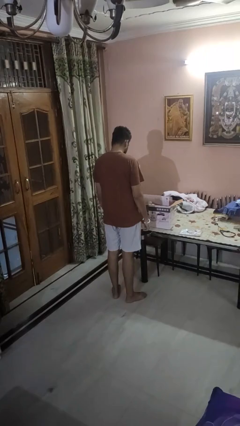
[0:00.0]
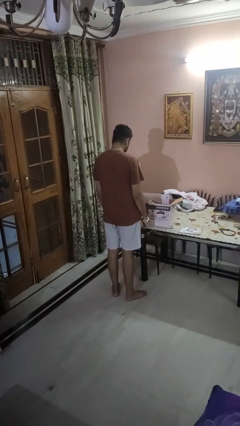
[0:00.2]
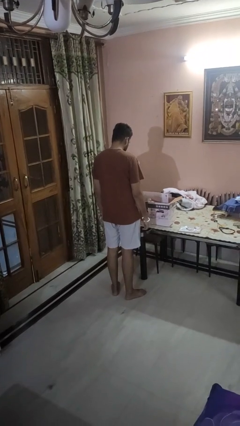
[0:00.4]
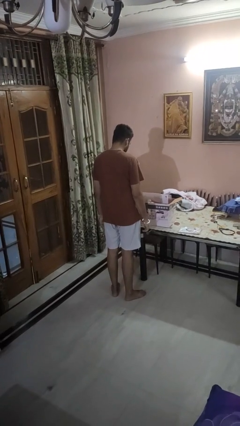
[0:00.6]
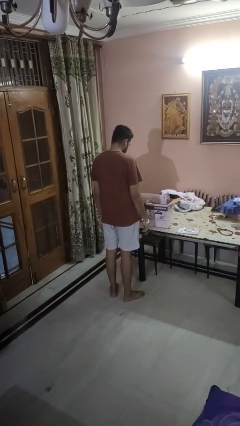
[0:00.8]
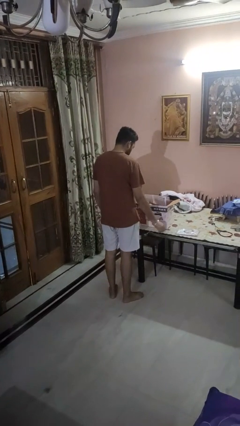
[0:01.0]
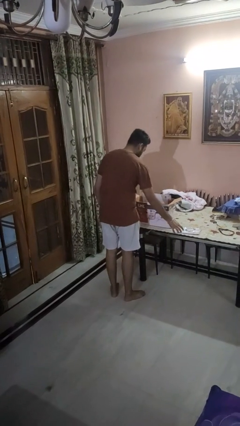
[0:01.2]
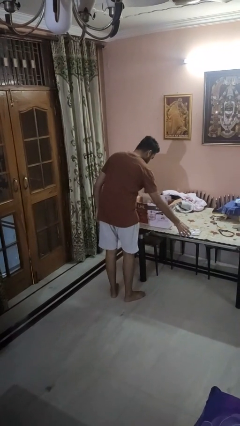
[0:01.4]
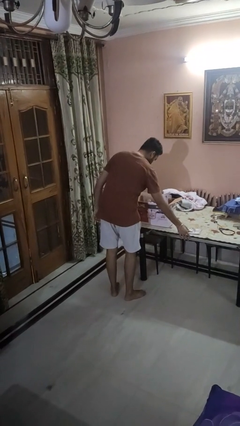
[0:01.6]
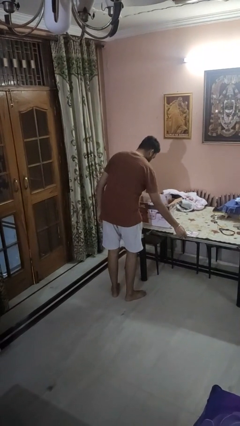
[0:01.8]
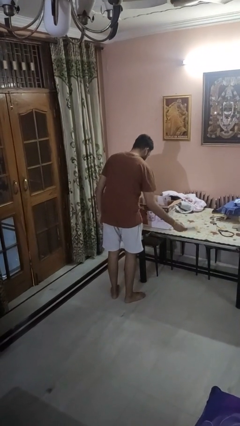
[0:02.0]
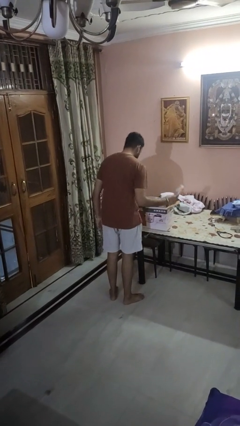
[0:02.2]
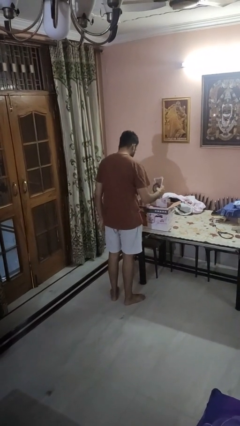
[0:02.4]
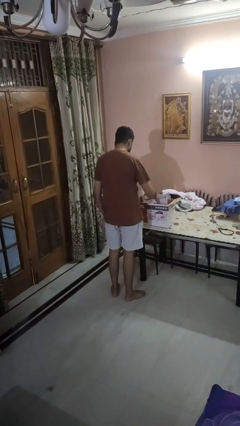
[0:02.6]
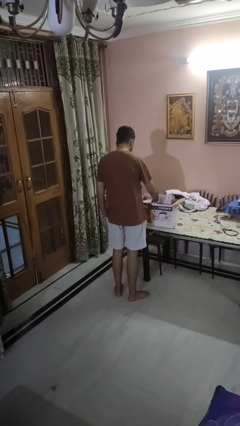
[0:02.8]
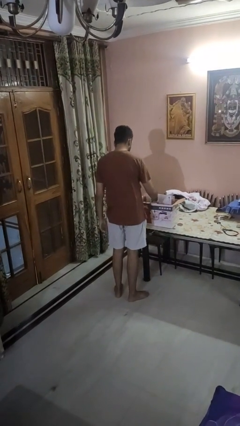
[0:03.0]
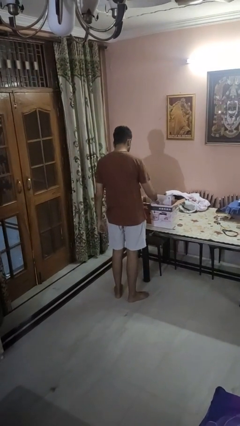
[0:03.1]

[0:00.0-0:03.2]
person puts object into box

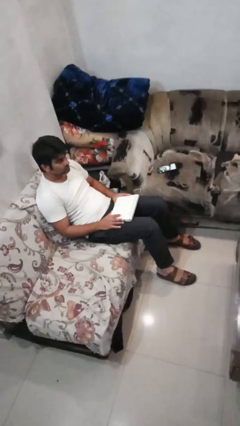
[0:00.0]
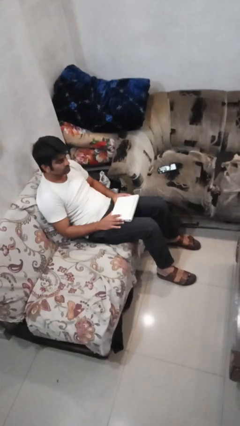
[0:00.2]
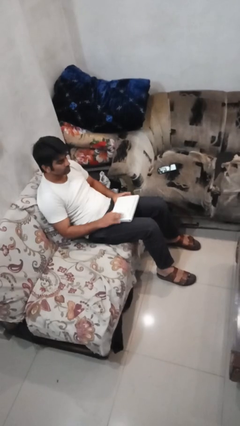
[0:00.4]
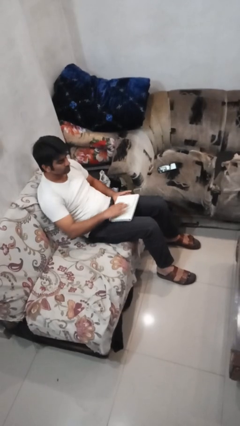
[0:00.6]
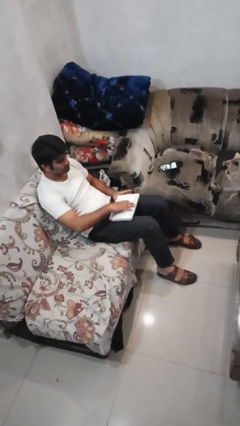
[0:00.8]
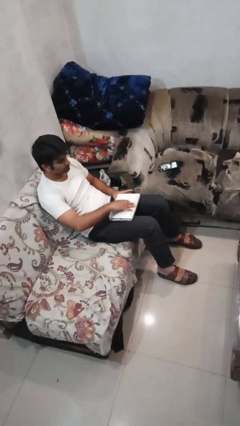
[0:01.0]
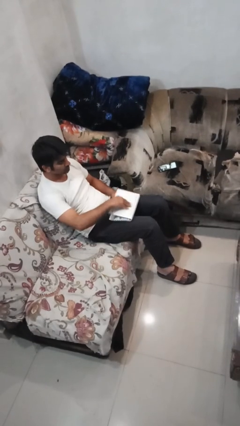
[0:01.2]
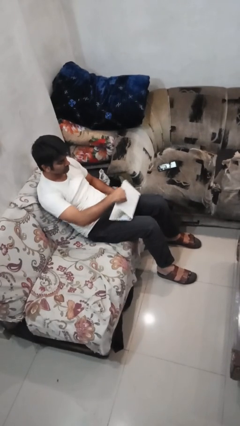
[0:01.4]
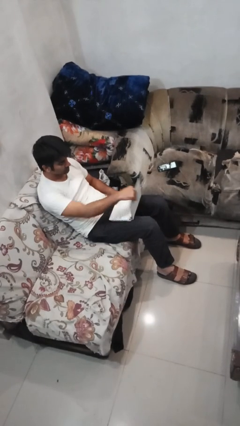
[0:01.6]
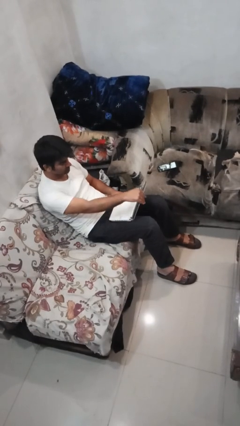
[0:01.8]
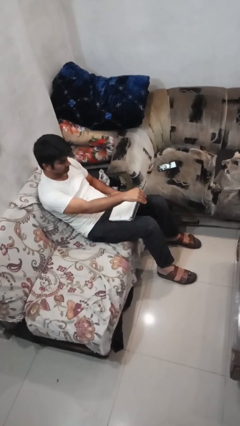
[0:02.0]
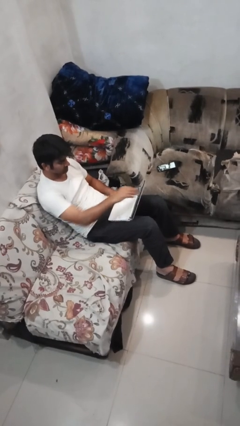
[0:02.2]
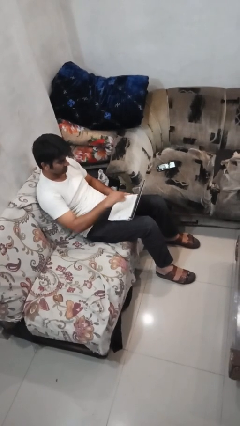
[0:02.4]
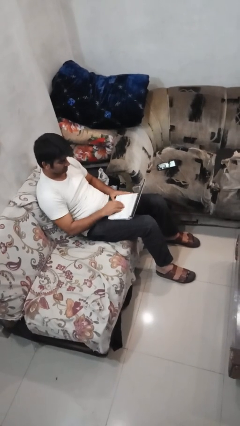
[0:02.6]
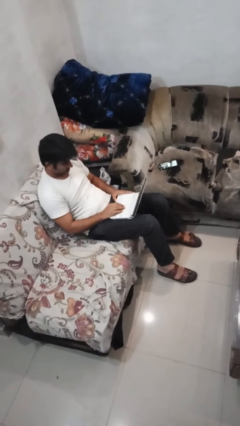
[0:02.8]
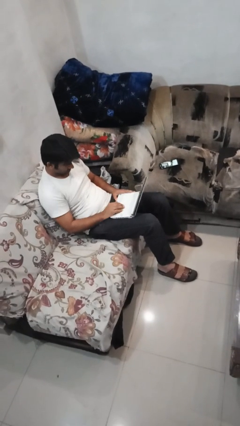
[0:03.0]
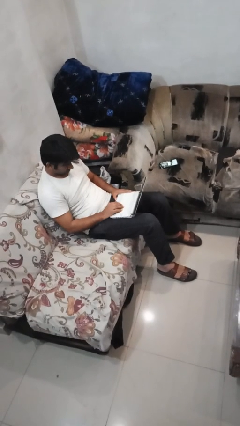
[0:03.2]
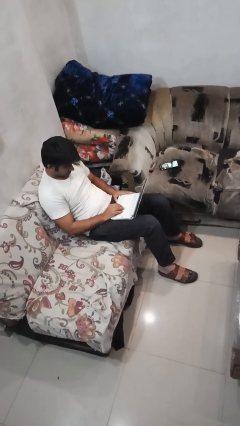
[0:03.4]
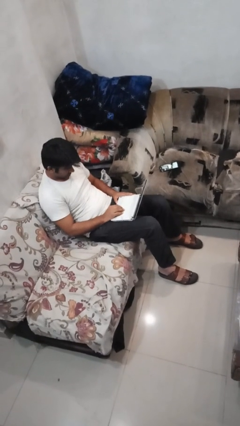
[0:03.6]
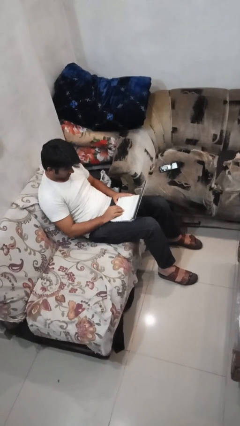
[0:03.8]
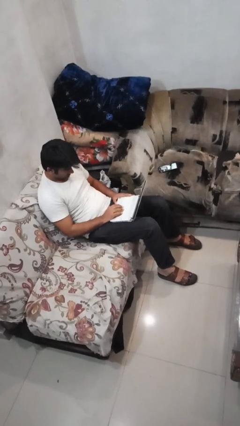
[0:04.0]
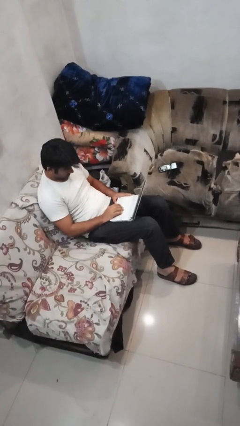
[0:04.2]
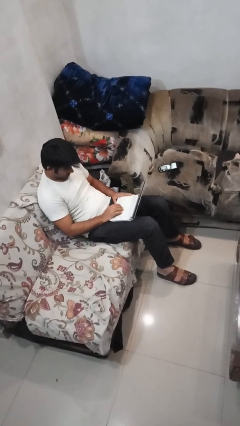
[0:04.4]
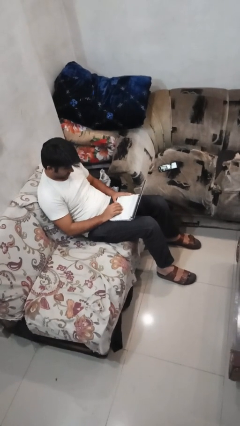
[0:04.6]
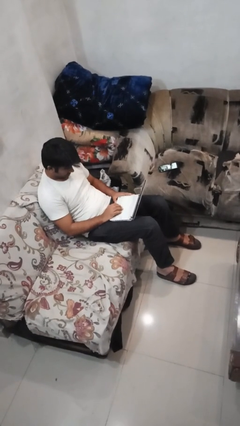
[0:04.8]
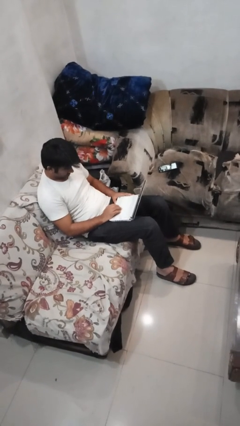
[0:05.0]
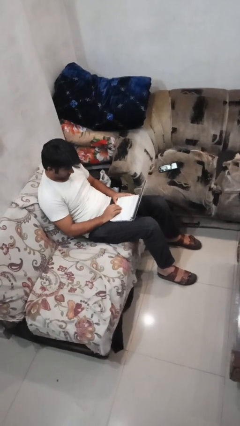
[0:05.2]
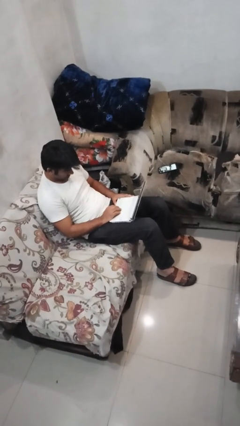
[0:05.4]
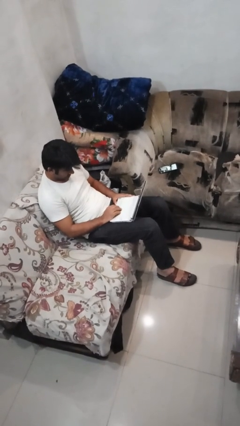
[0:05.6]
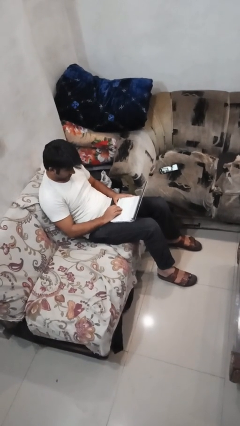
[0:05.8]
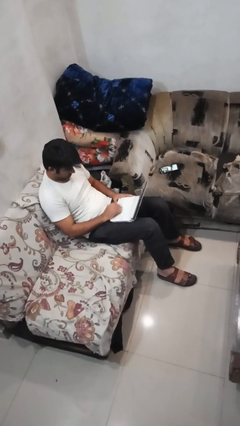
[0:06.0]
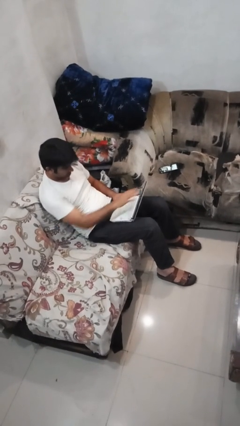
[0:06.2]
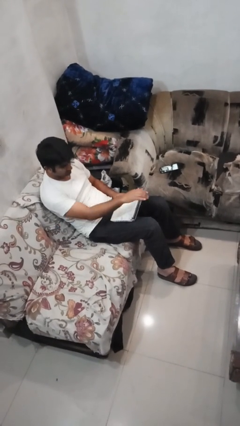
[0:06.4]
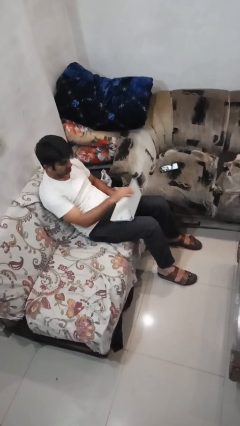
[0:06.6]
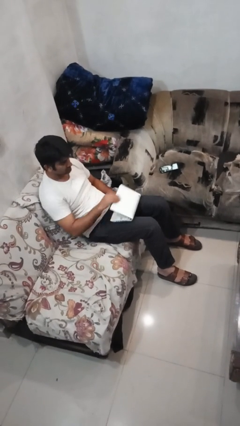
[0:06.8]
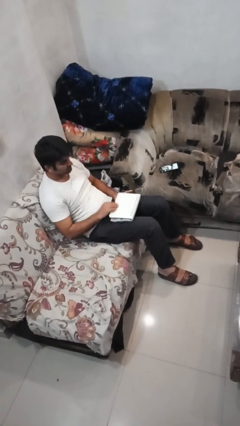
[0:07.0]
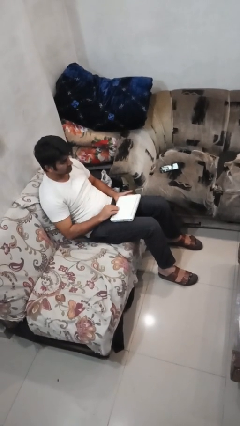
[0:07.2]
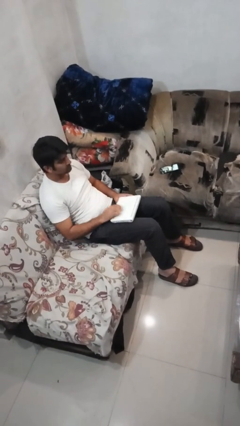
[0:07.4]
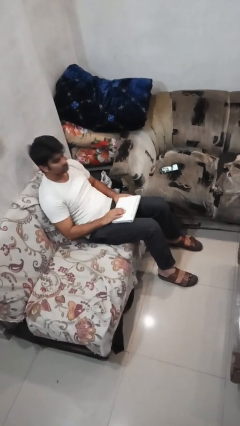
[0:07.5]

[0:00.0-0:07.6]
person interacts with laptop

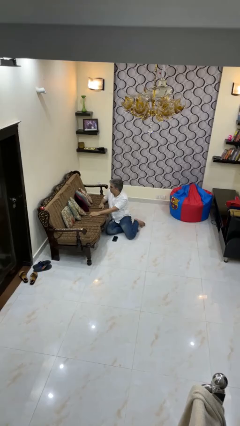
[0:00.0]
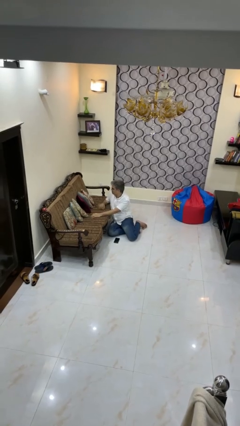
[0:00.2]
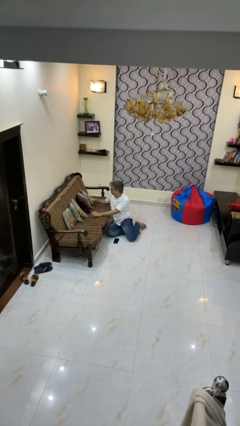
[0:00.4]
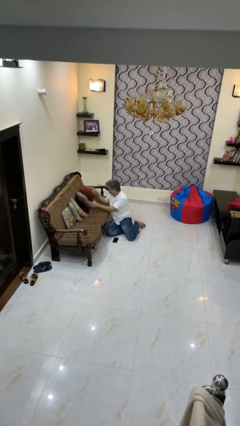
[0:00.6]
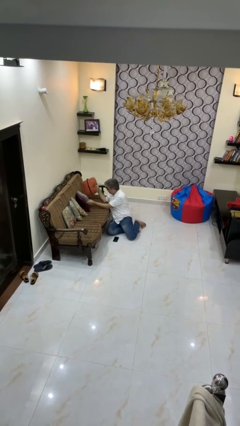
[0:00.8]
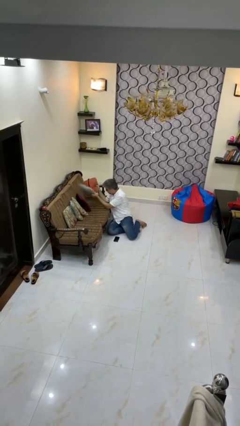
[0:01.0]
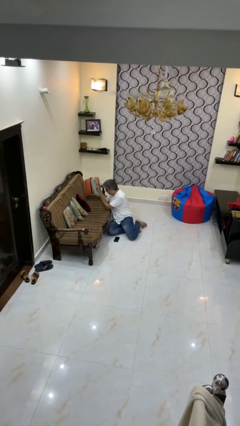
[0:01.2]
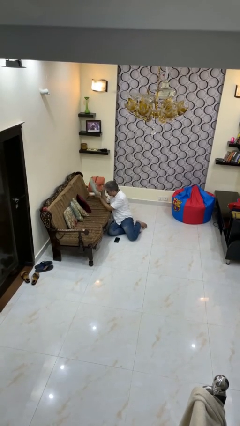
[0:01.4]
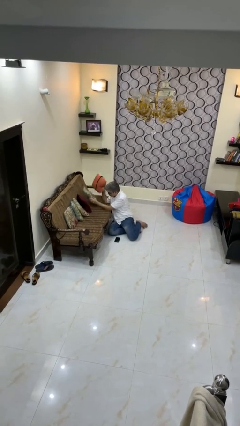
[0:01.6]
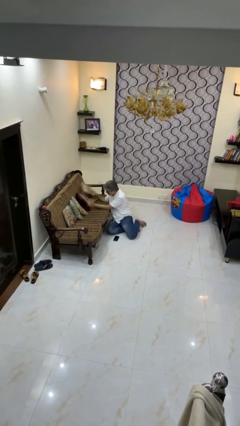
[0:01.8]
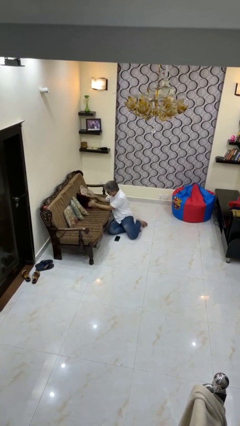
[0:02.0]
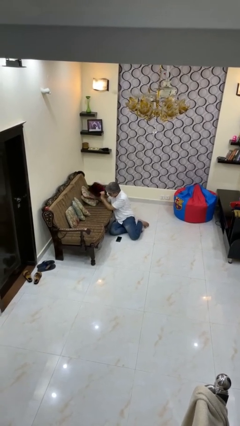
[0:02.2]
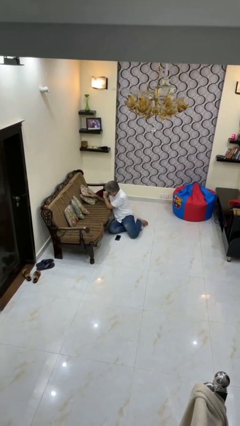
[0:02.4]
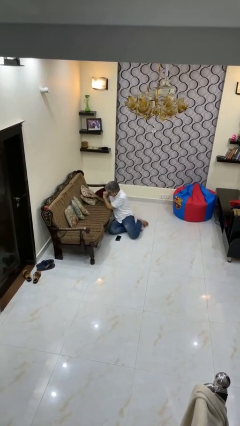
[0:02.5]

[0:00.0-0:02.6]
person searches in couch

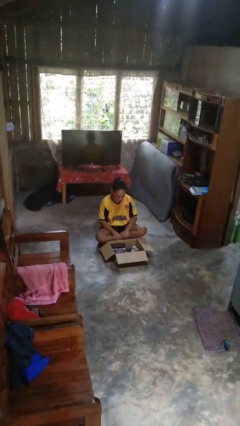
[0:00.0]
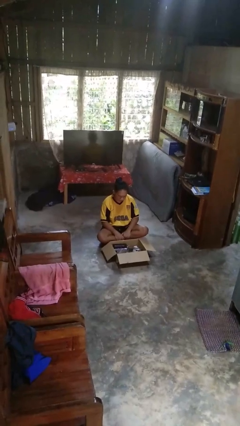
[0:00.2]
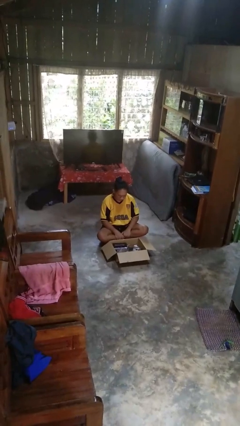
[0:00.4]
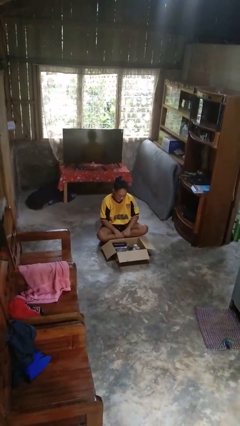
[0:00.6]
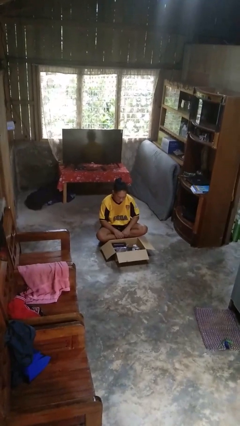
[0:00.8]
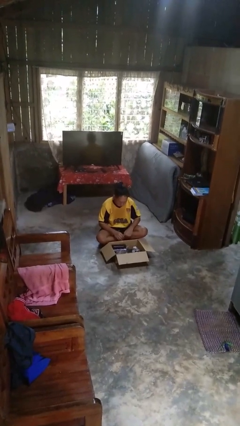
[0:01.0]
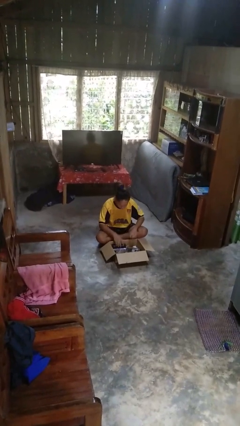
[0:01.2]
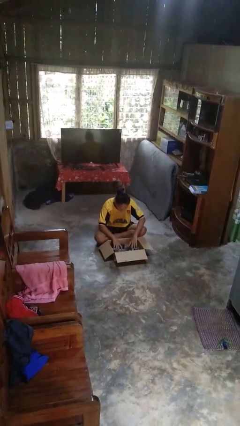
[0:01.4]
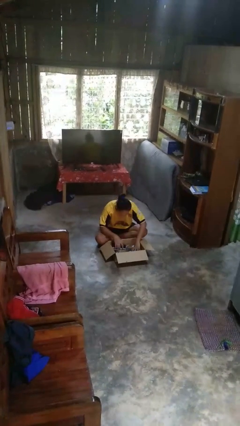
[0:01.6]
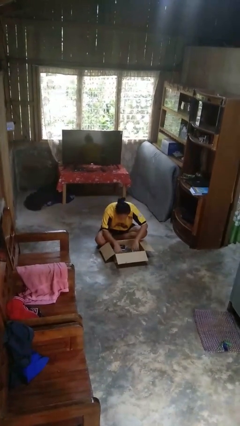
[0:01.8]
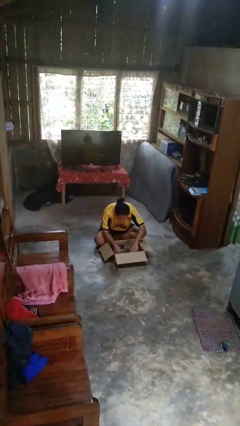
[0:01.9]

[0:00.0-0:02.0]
person searches in box

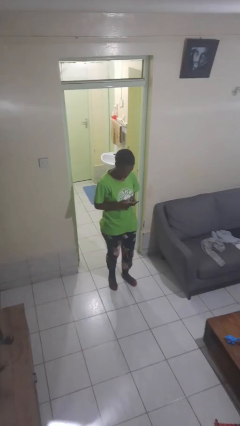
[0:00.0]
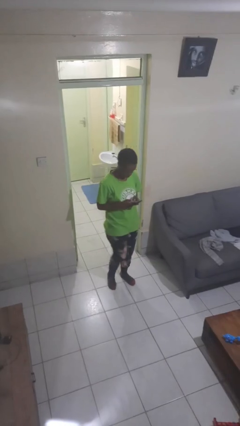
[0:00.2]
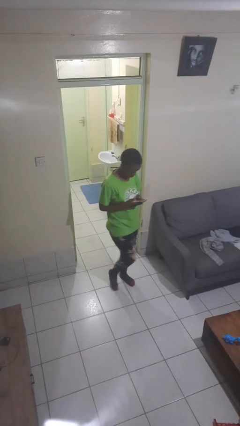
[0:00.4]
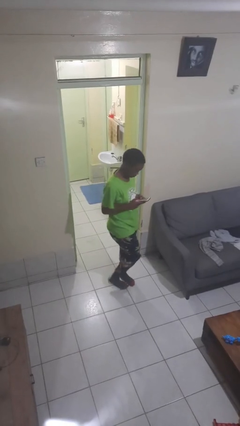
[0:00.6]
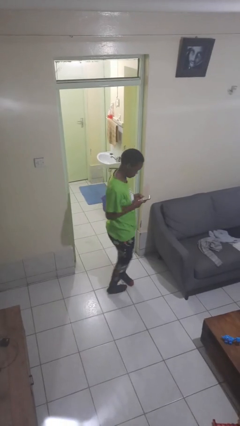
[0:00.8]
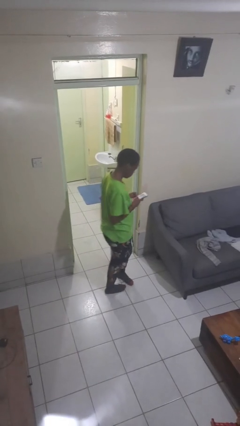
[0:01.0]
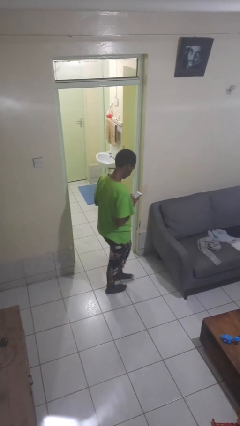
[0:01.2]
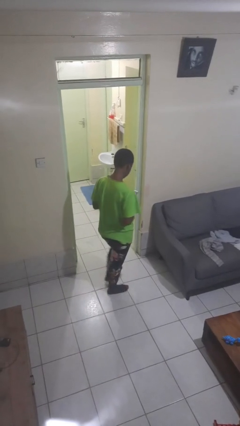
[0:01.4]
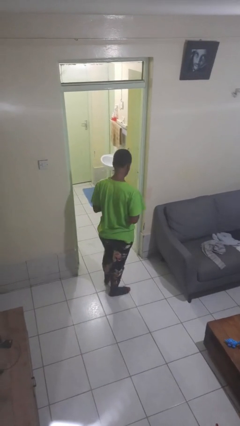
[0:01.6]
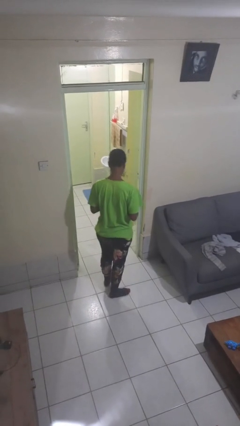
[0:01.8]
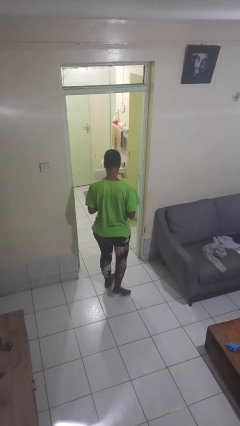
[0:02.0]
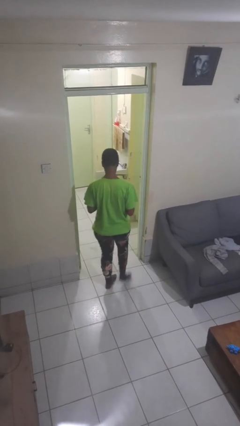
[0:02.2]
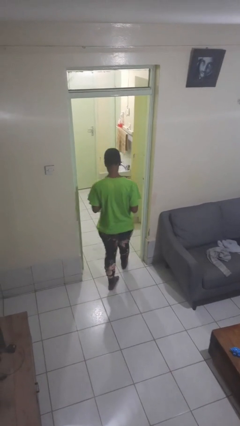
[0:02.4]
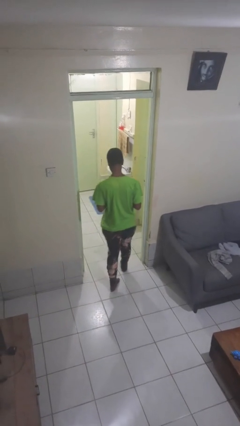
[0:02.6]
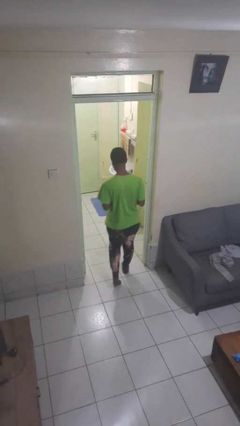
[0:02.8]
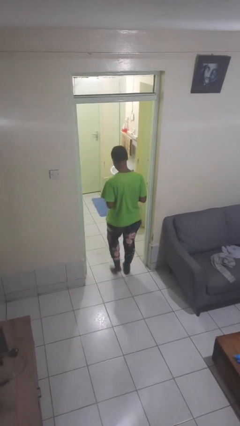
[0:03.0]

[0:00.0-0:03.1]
person exits scene through structure
